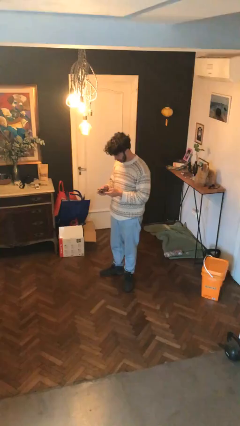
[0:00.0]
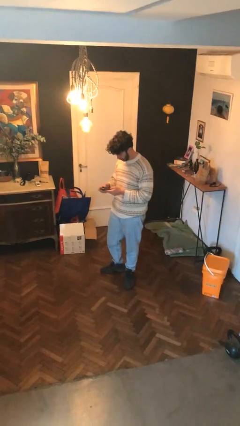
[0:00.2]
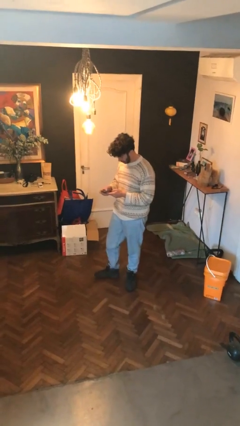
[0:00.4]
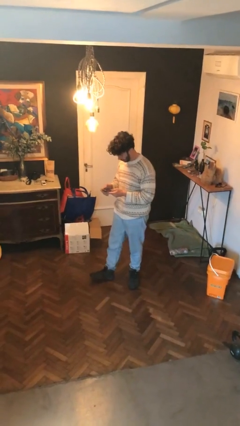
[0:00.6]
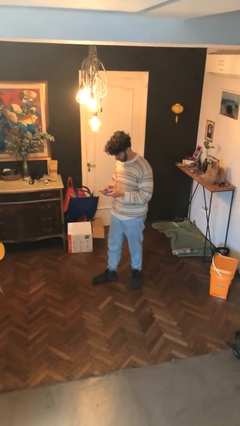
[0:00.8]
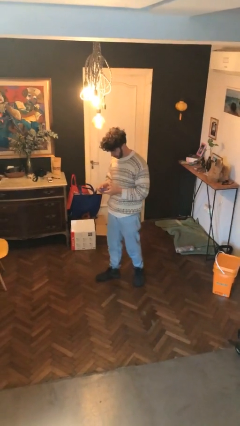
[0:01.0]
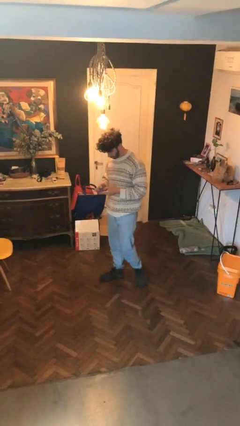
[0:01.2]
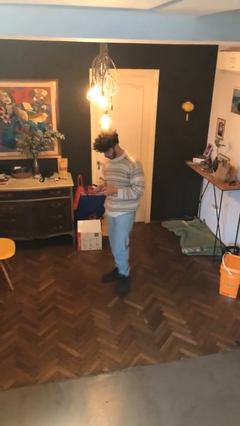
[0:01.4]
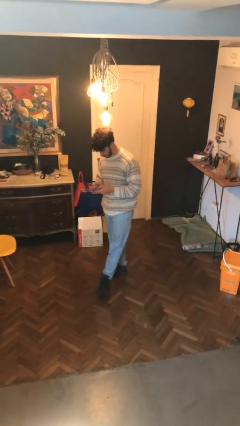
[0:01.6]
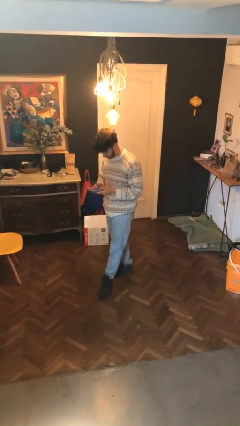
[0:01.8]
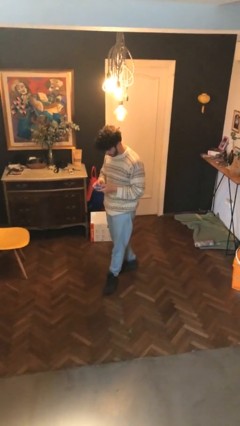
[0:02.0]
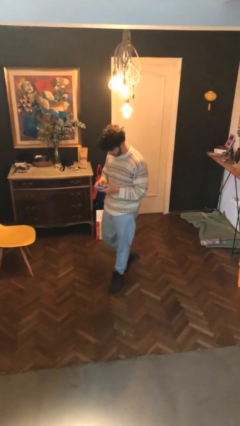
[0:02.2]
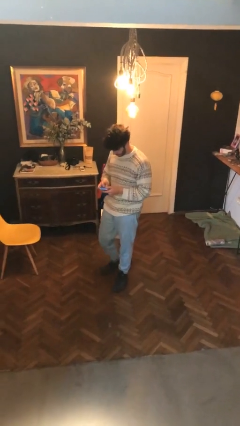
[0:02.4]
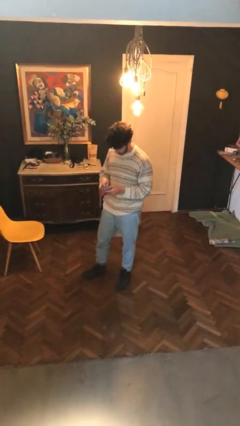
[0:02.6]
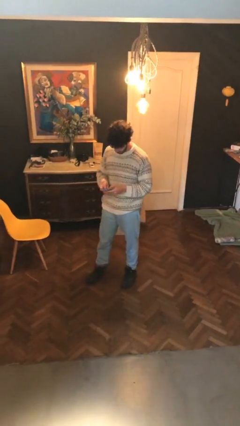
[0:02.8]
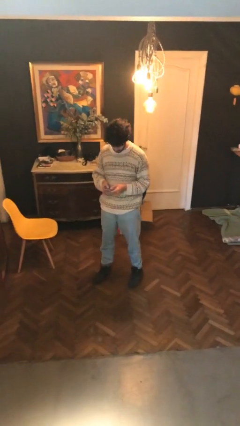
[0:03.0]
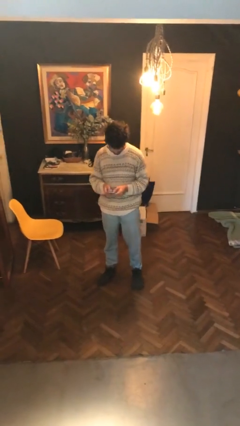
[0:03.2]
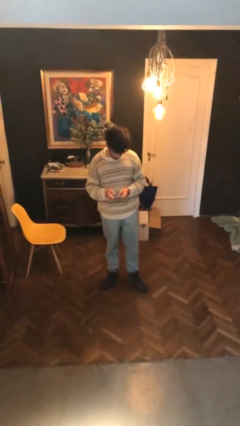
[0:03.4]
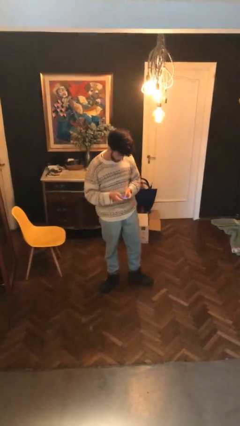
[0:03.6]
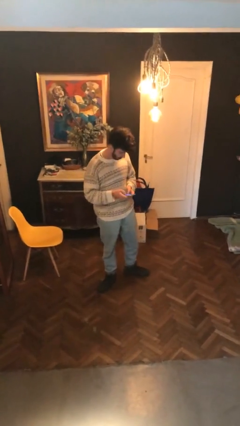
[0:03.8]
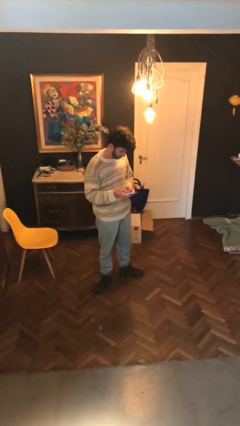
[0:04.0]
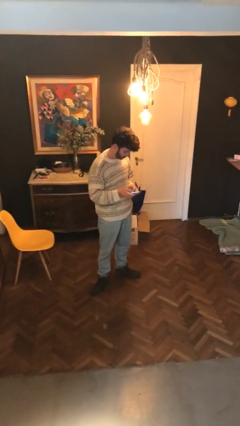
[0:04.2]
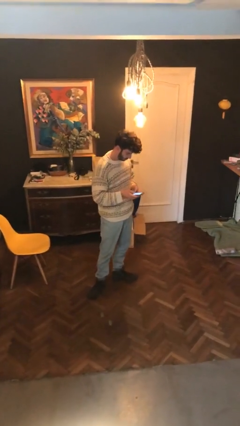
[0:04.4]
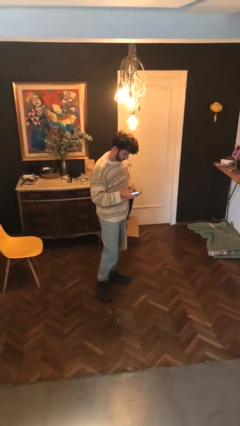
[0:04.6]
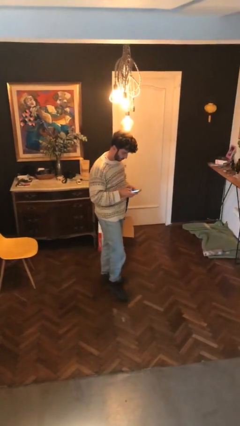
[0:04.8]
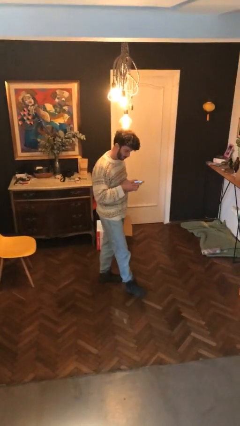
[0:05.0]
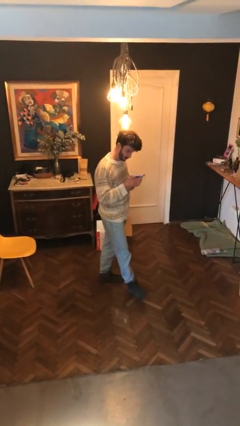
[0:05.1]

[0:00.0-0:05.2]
person texts on phone

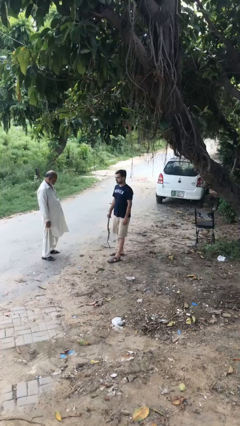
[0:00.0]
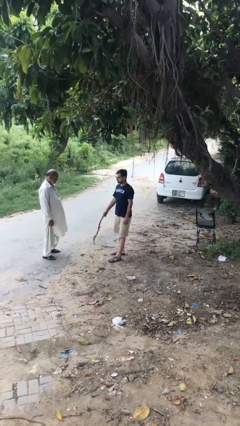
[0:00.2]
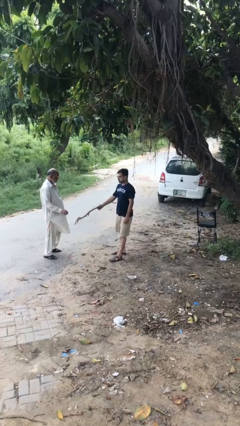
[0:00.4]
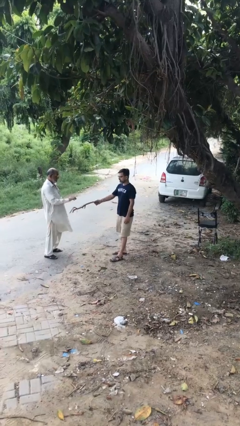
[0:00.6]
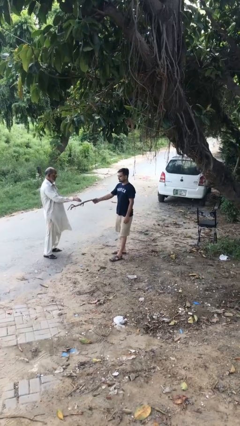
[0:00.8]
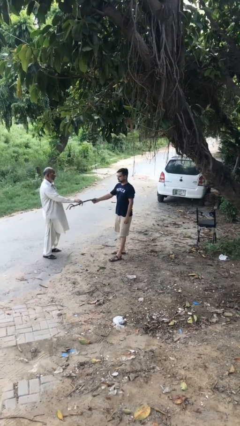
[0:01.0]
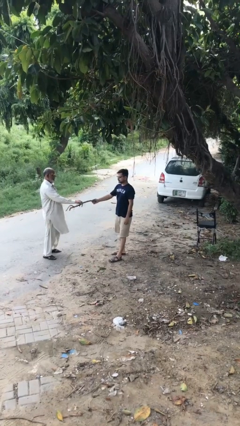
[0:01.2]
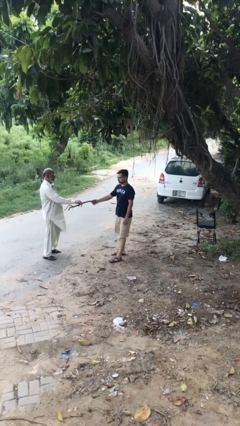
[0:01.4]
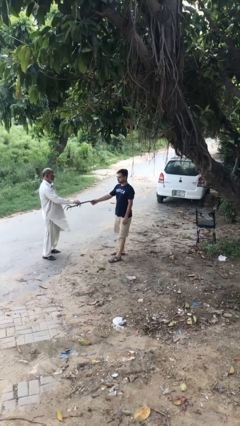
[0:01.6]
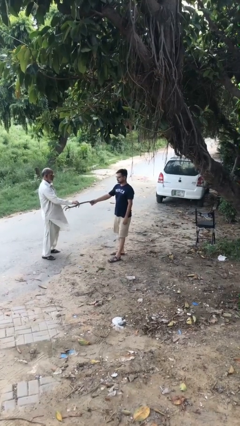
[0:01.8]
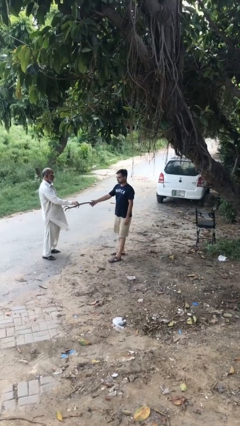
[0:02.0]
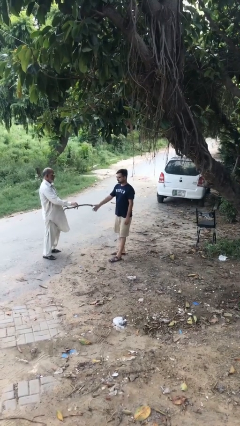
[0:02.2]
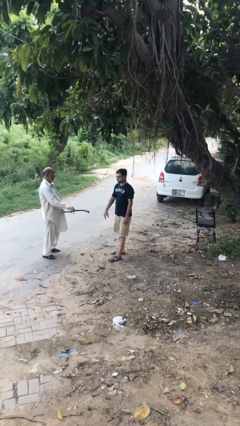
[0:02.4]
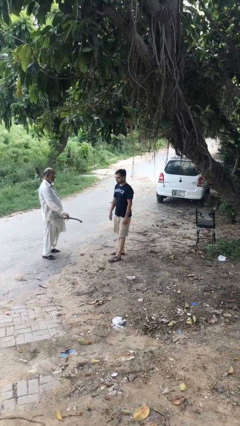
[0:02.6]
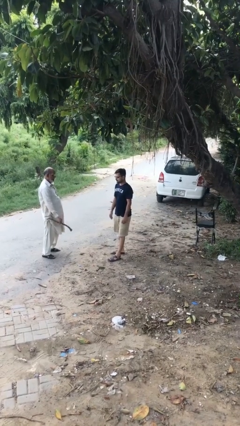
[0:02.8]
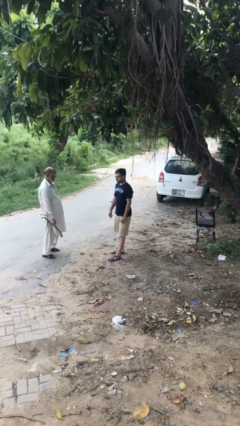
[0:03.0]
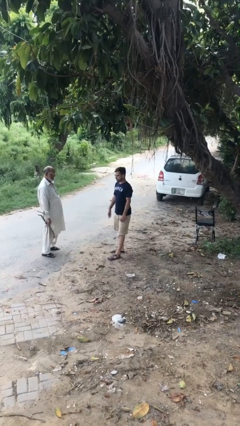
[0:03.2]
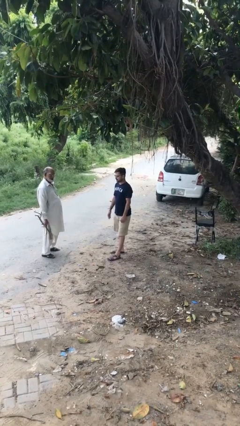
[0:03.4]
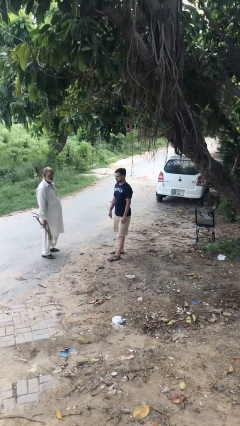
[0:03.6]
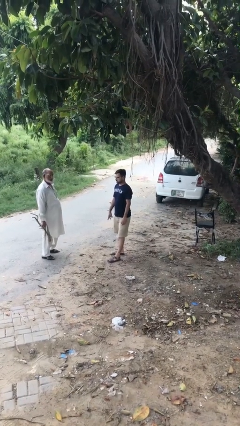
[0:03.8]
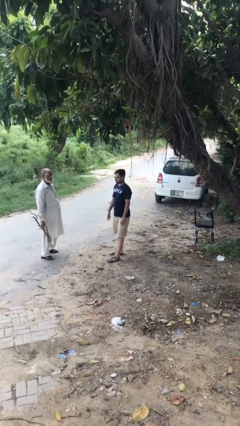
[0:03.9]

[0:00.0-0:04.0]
person transfers object to person

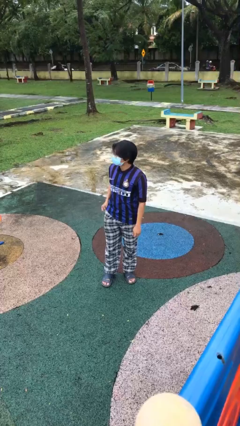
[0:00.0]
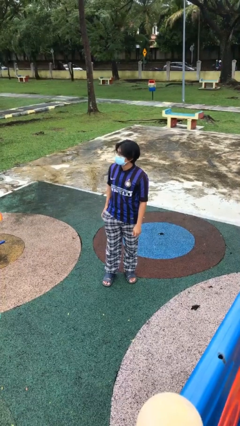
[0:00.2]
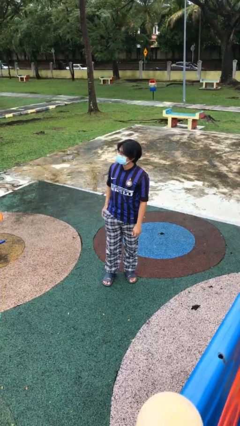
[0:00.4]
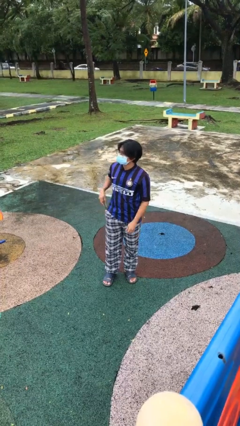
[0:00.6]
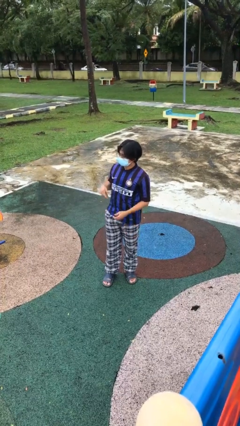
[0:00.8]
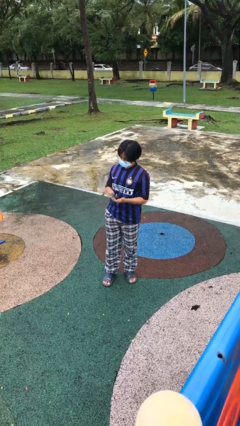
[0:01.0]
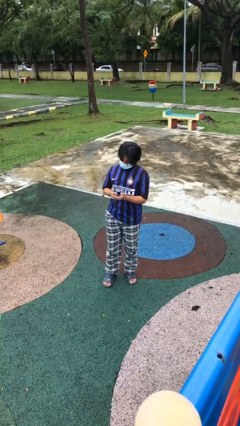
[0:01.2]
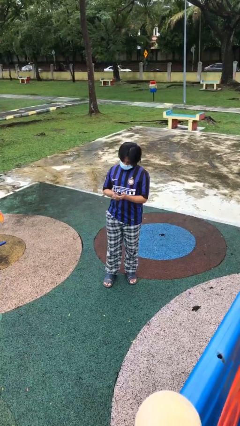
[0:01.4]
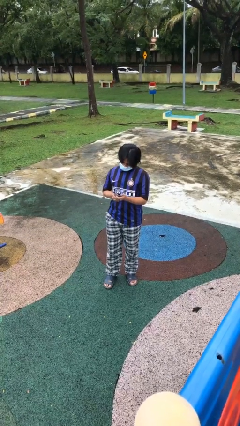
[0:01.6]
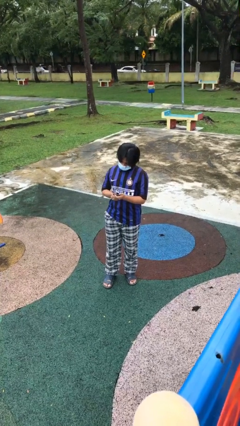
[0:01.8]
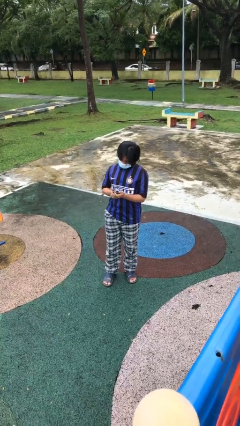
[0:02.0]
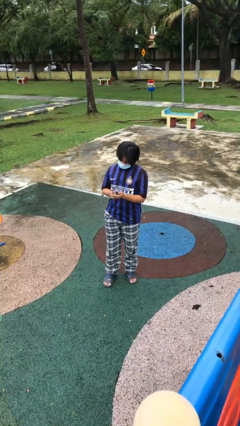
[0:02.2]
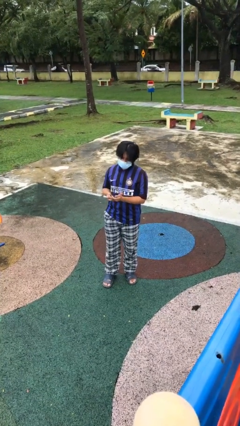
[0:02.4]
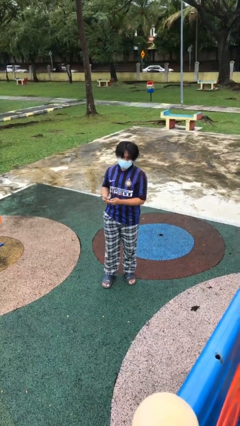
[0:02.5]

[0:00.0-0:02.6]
person takes phone from pocket

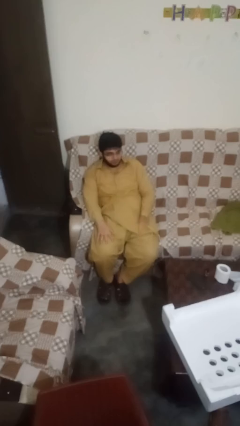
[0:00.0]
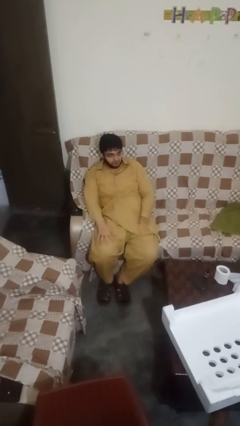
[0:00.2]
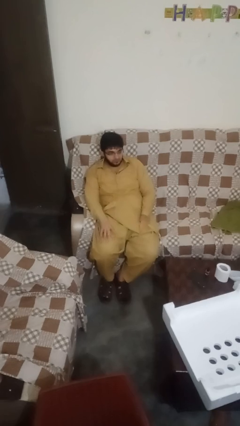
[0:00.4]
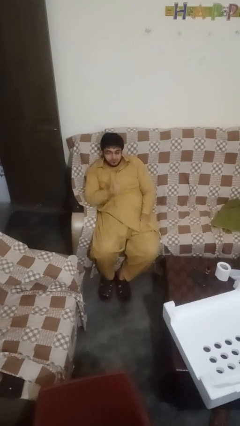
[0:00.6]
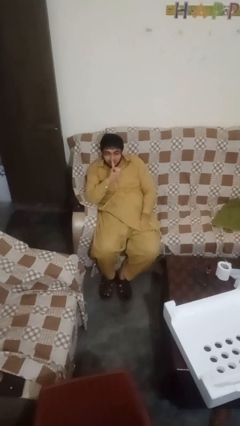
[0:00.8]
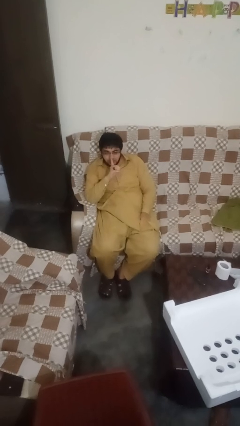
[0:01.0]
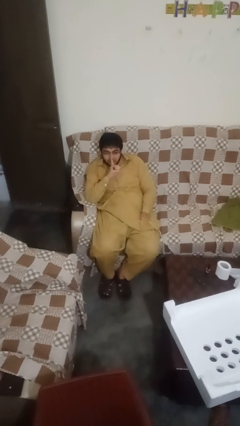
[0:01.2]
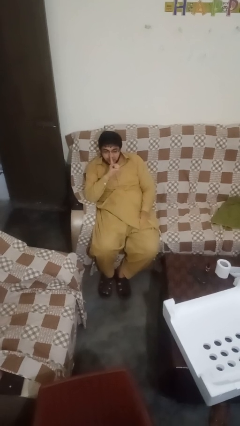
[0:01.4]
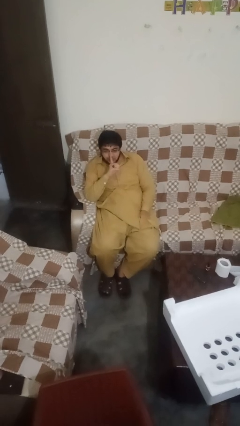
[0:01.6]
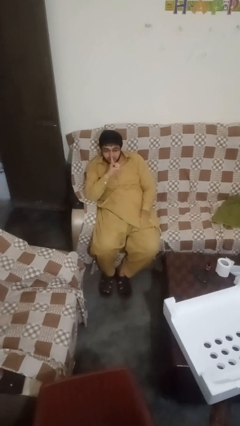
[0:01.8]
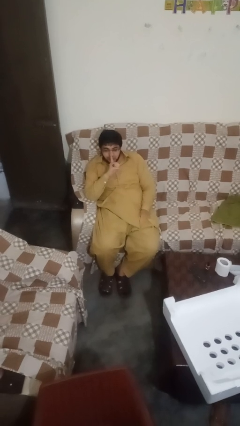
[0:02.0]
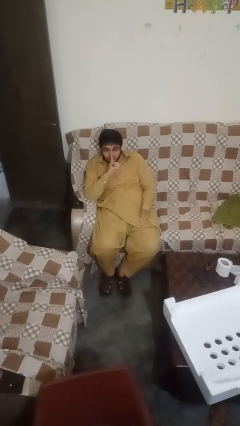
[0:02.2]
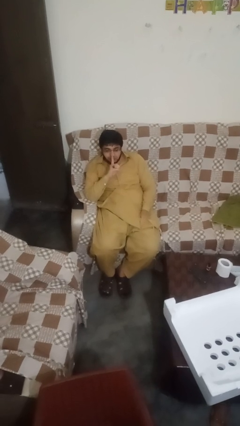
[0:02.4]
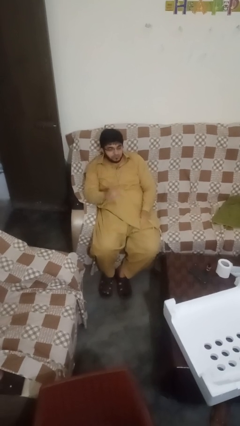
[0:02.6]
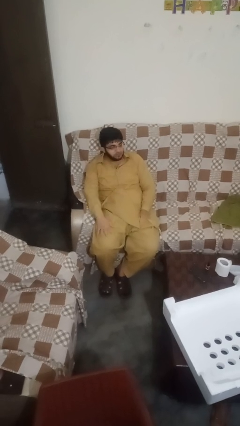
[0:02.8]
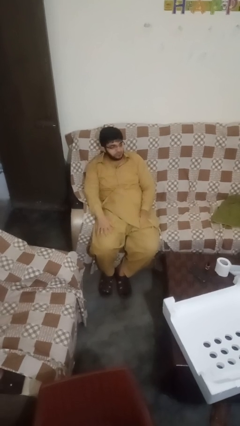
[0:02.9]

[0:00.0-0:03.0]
person gestures be quiet

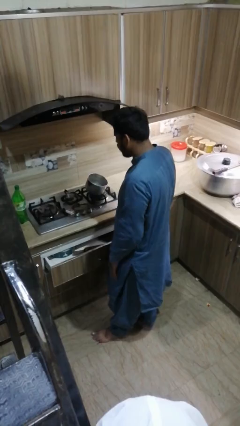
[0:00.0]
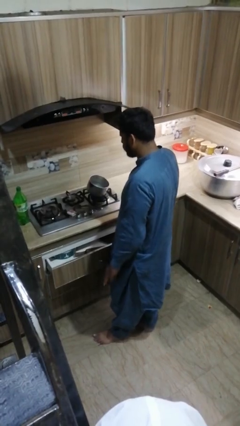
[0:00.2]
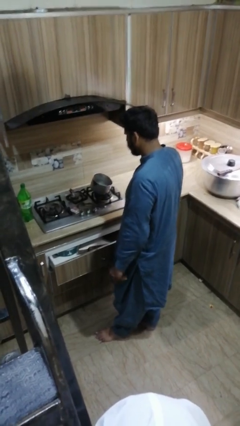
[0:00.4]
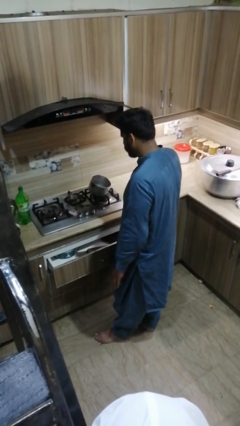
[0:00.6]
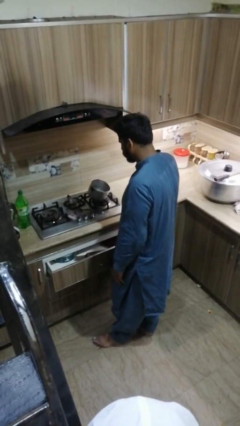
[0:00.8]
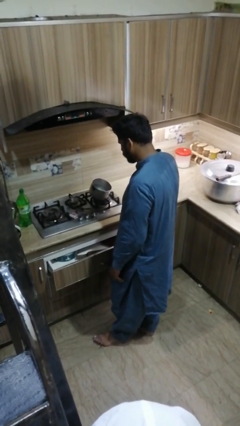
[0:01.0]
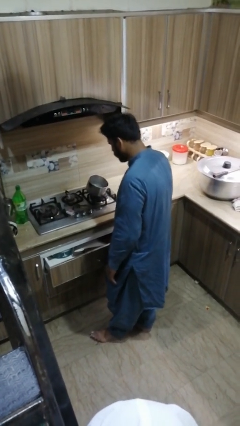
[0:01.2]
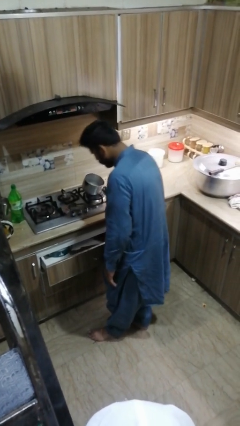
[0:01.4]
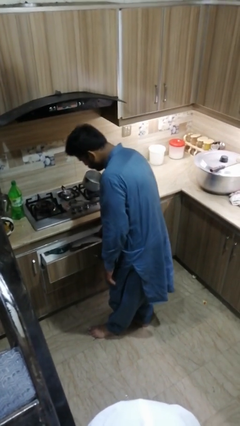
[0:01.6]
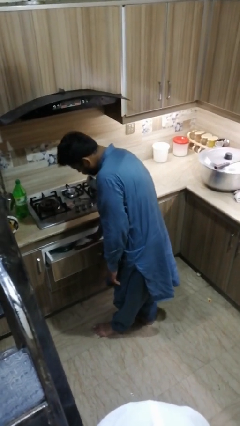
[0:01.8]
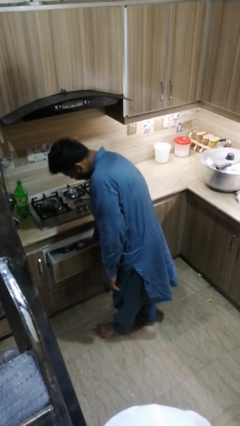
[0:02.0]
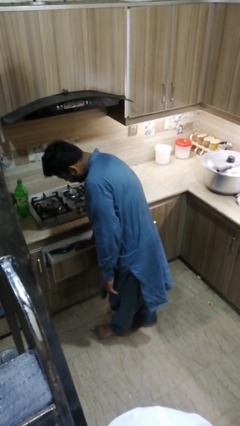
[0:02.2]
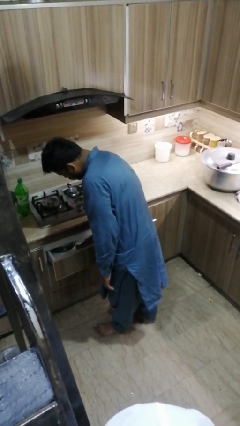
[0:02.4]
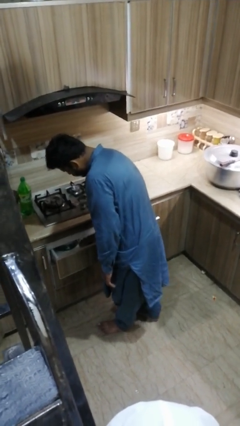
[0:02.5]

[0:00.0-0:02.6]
person searches in kitchen drawer
